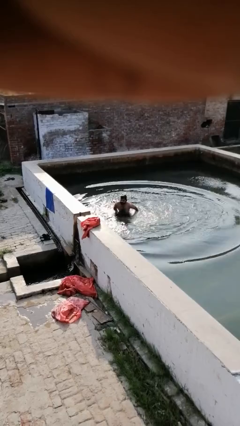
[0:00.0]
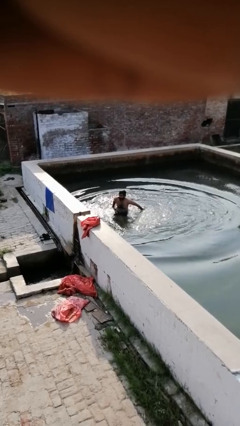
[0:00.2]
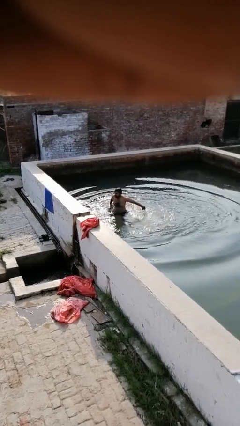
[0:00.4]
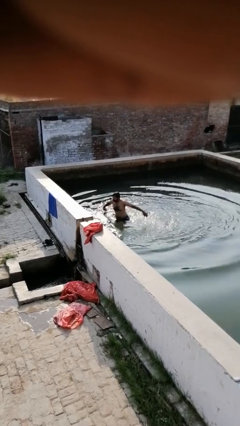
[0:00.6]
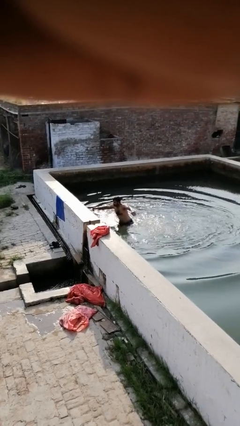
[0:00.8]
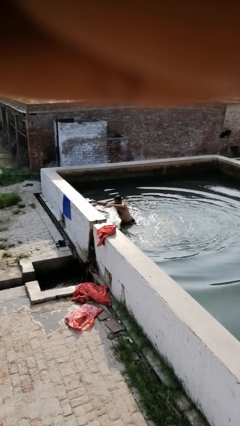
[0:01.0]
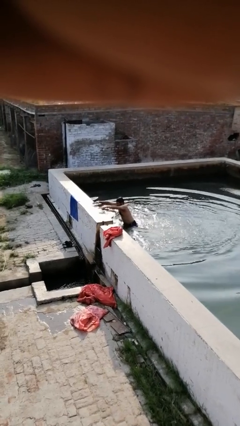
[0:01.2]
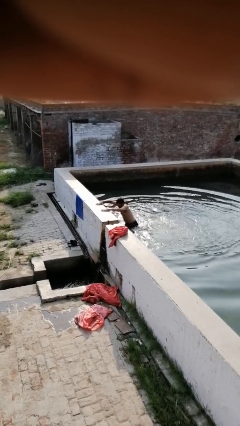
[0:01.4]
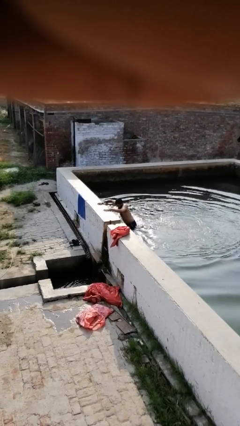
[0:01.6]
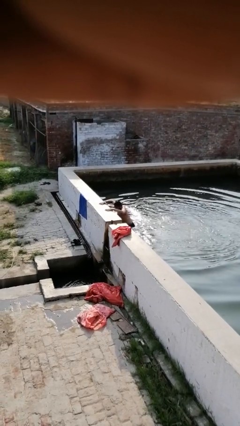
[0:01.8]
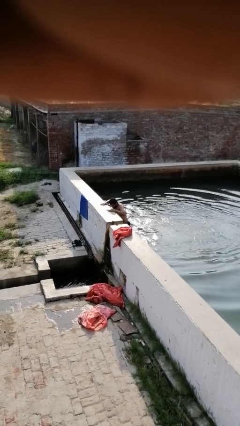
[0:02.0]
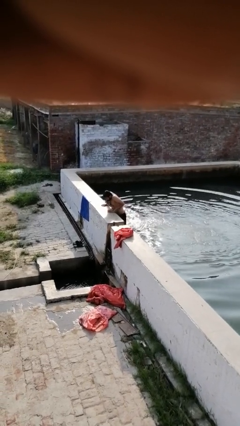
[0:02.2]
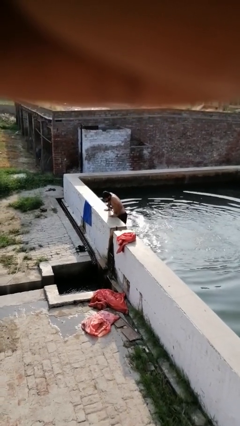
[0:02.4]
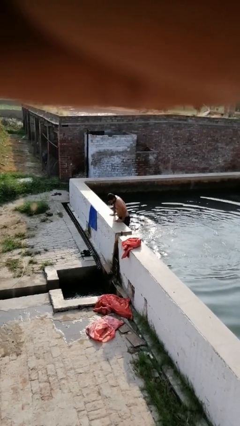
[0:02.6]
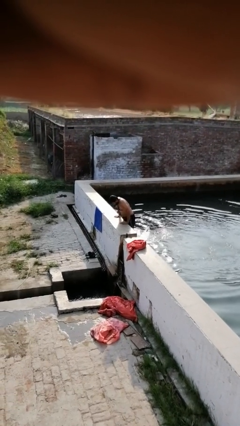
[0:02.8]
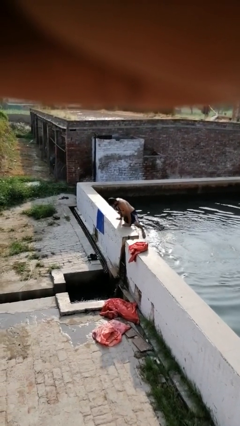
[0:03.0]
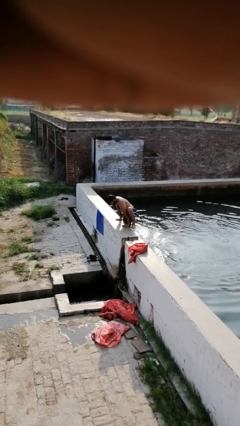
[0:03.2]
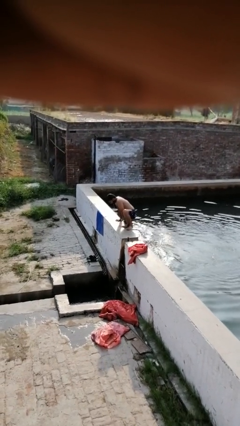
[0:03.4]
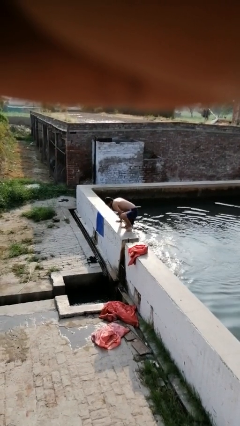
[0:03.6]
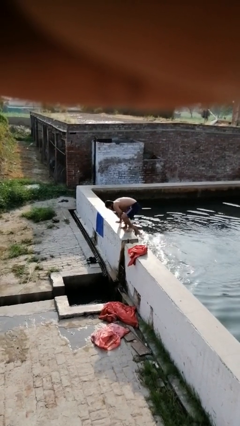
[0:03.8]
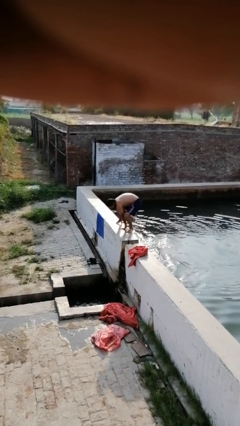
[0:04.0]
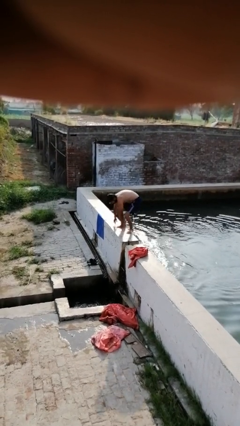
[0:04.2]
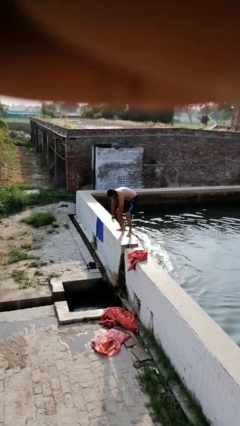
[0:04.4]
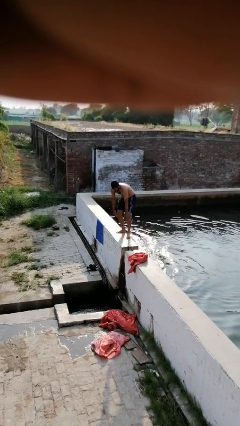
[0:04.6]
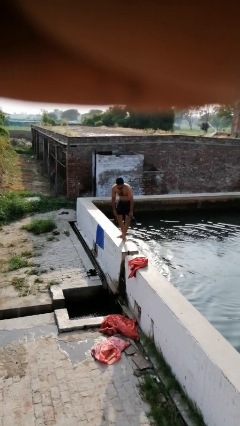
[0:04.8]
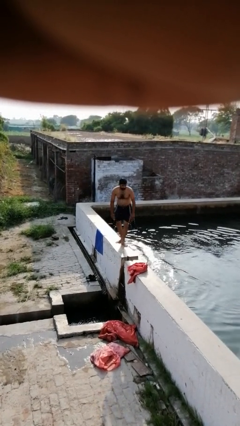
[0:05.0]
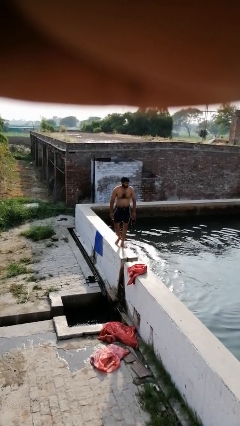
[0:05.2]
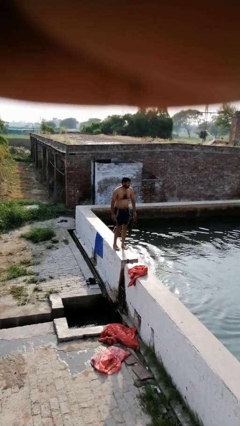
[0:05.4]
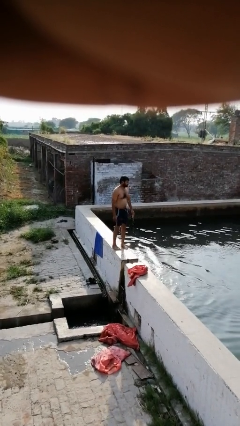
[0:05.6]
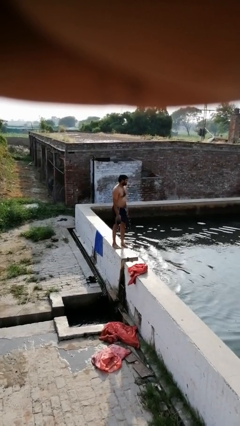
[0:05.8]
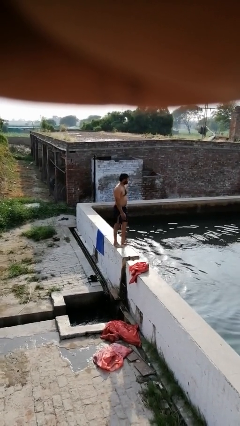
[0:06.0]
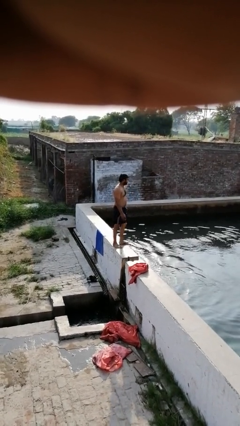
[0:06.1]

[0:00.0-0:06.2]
person exits pool

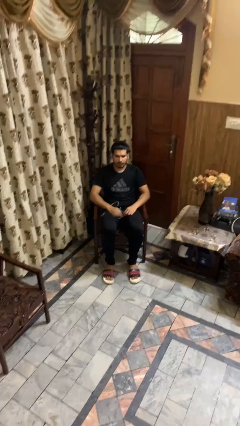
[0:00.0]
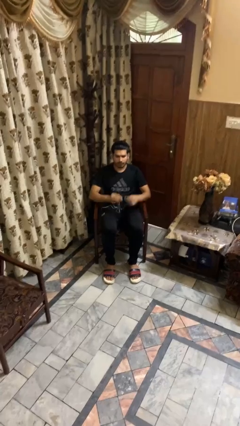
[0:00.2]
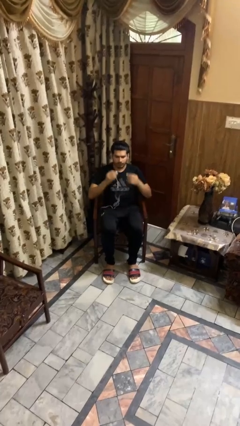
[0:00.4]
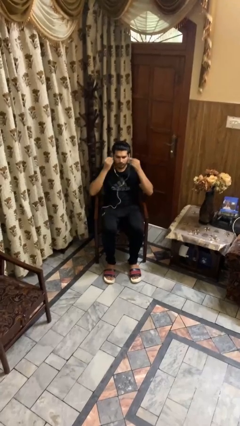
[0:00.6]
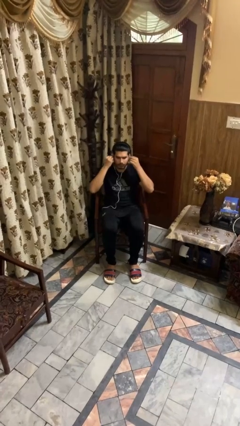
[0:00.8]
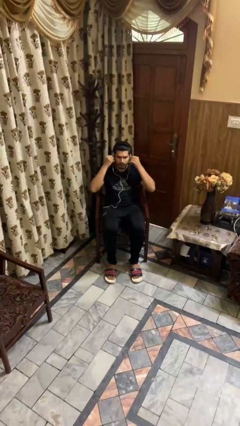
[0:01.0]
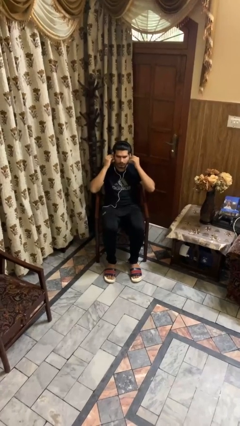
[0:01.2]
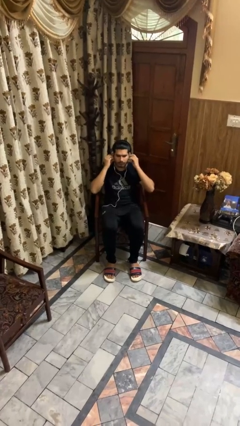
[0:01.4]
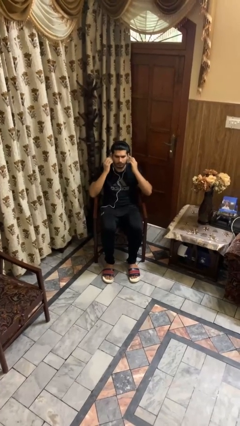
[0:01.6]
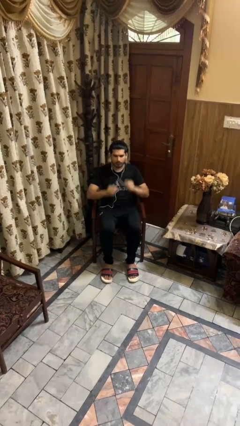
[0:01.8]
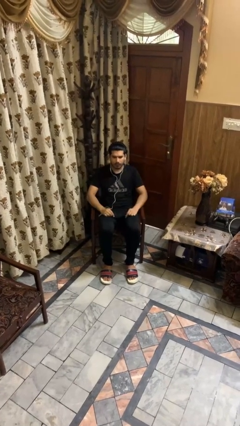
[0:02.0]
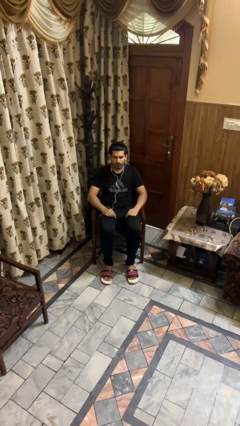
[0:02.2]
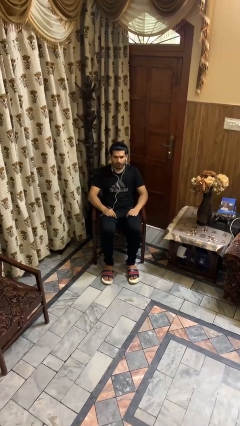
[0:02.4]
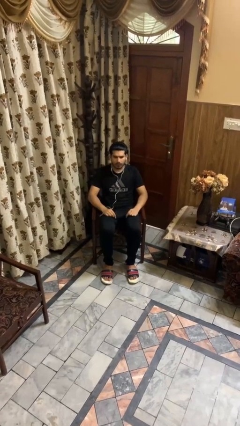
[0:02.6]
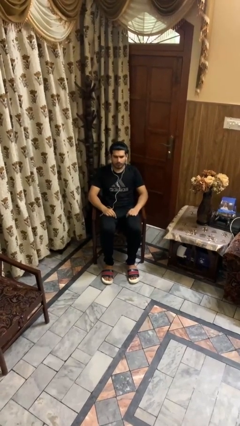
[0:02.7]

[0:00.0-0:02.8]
person puts on headphones

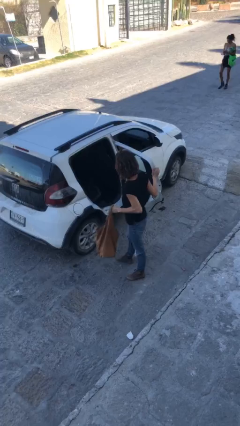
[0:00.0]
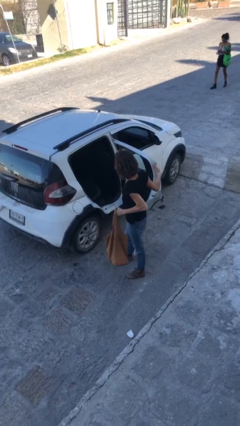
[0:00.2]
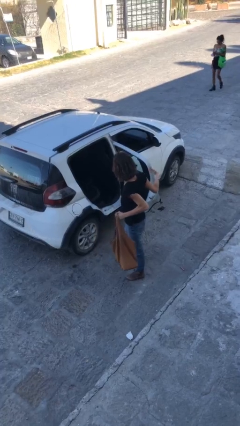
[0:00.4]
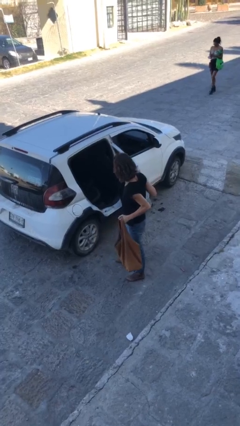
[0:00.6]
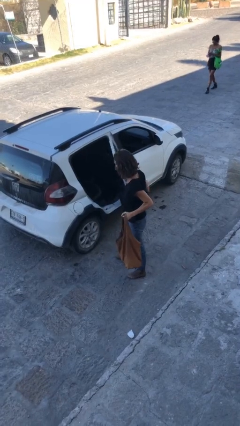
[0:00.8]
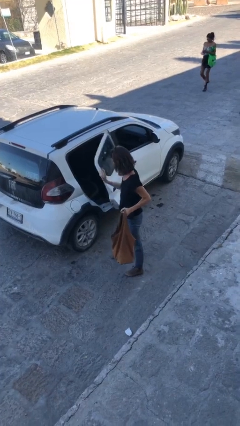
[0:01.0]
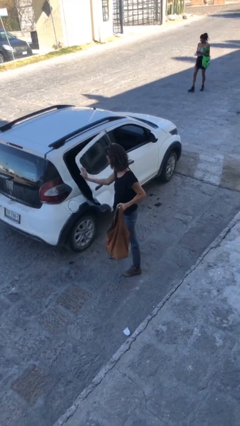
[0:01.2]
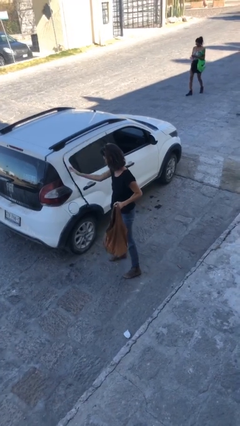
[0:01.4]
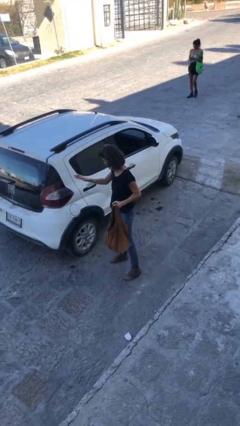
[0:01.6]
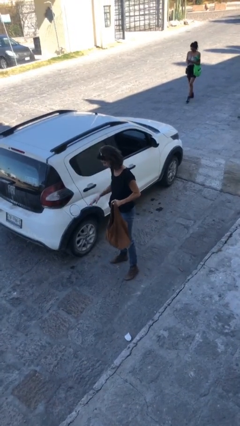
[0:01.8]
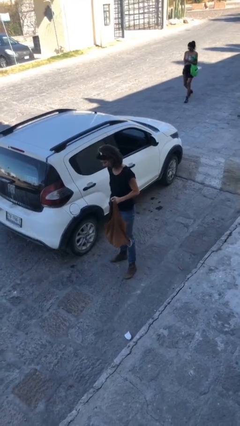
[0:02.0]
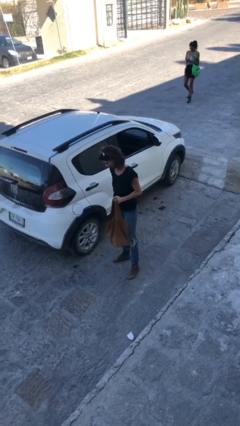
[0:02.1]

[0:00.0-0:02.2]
person closes car door

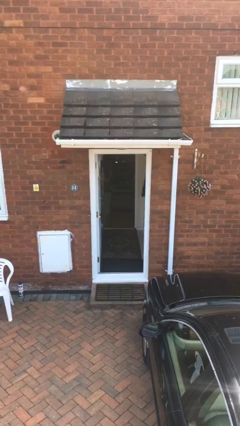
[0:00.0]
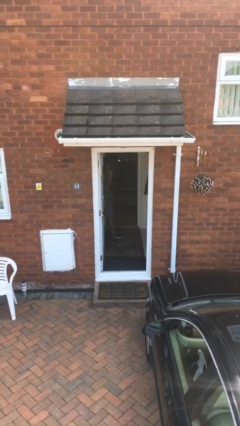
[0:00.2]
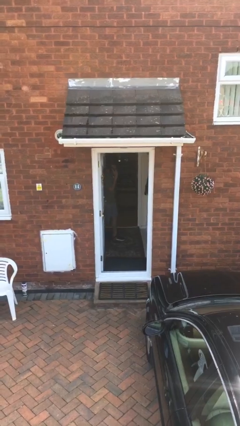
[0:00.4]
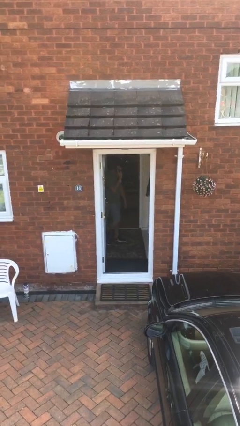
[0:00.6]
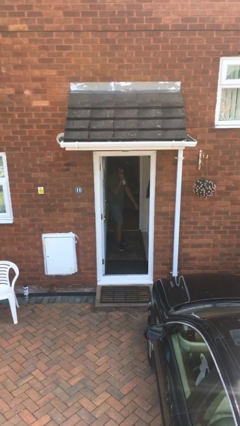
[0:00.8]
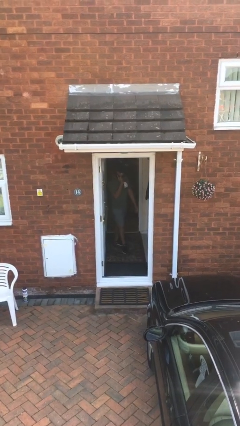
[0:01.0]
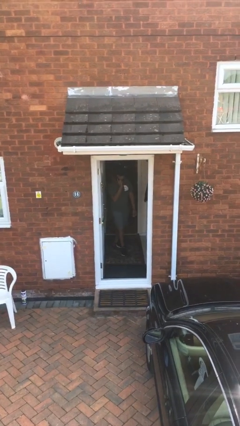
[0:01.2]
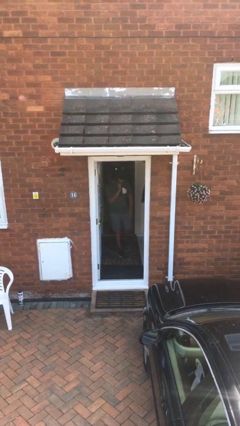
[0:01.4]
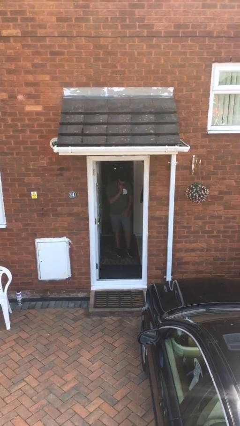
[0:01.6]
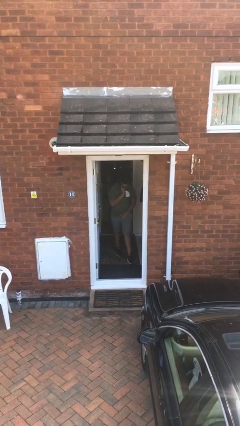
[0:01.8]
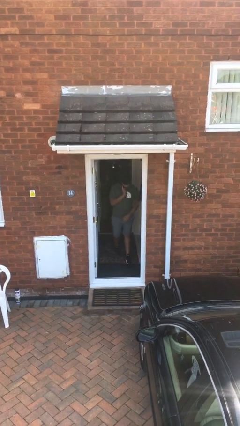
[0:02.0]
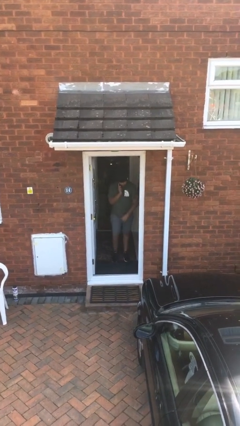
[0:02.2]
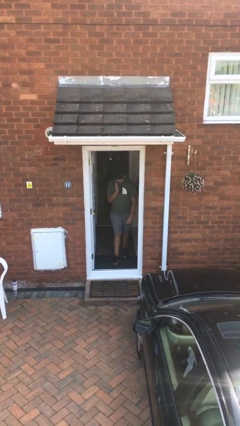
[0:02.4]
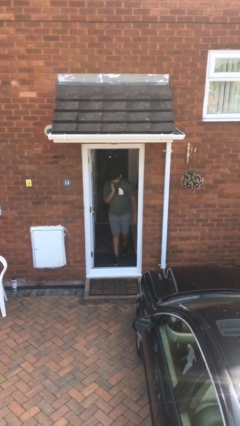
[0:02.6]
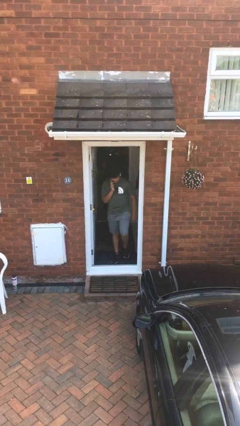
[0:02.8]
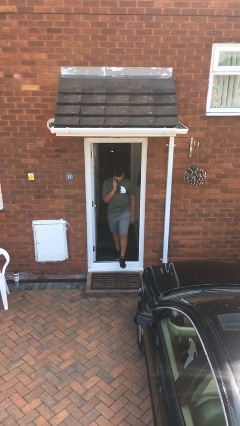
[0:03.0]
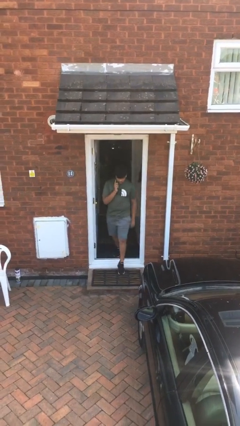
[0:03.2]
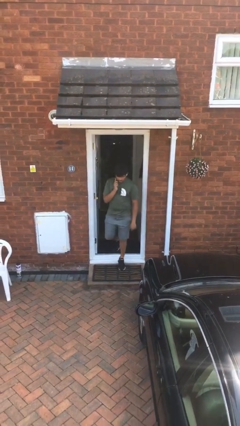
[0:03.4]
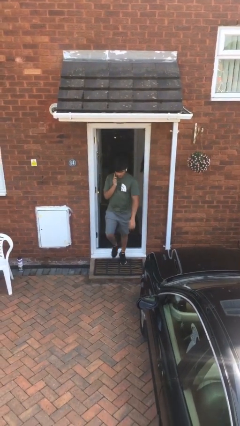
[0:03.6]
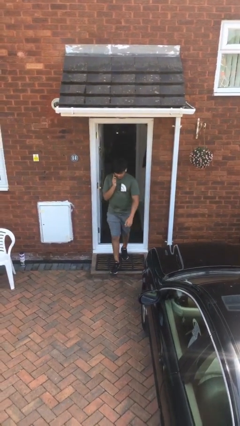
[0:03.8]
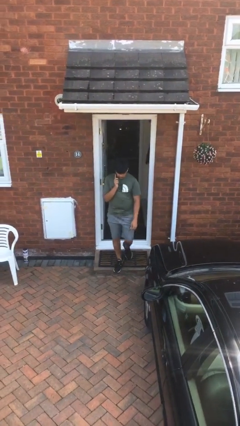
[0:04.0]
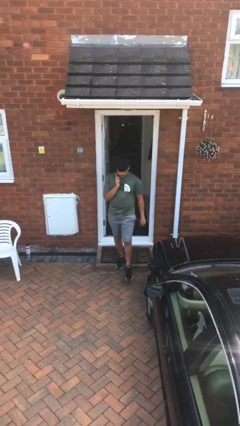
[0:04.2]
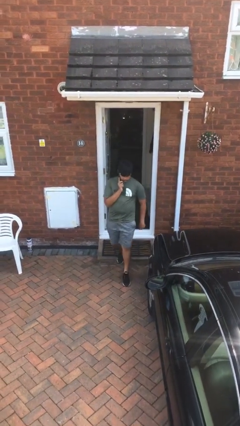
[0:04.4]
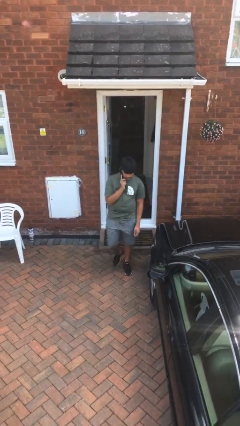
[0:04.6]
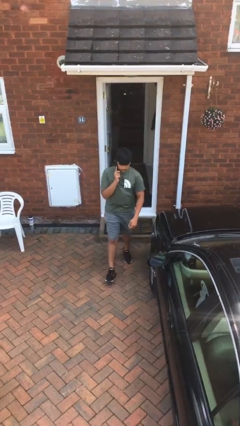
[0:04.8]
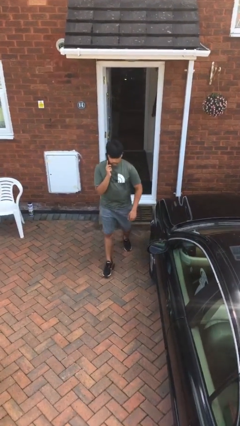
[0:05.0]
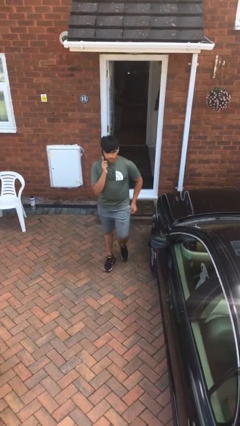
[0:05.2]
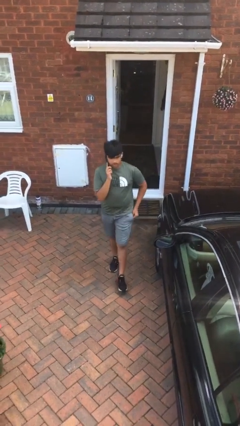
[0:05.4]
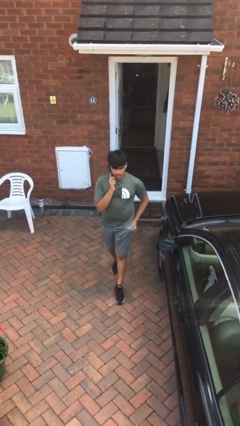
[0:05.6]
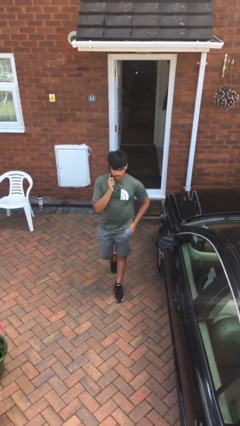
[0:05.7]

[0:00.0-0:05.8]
person enters scene through structure

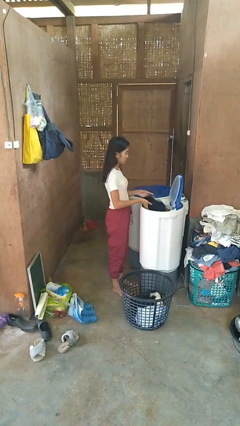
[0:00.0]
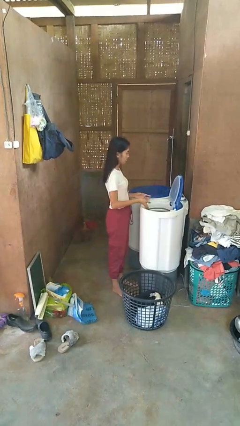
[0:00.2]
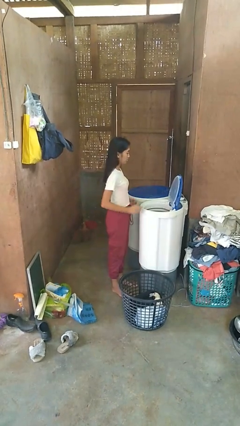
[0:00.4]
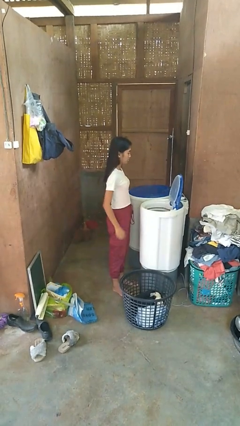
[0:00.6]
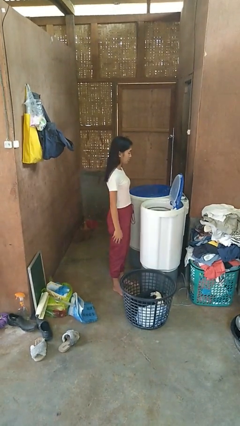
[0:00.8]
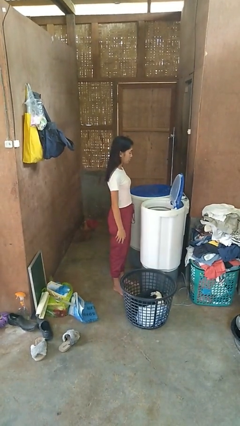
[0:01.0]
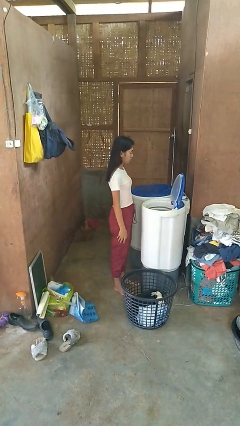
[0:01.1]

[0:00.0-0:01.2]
person loads dryer
